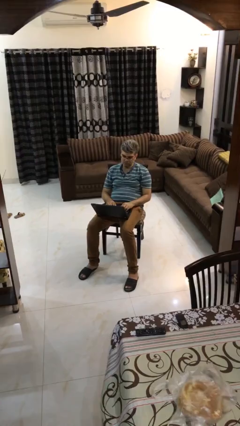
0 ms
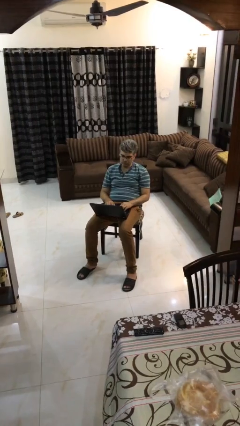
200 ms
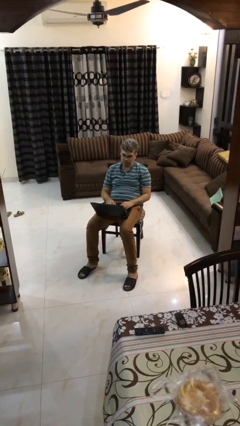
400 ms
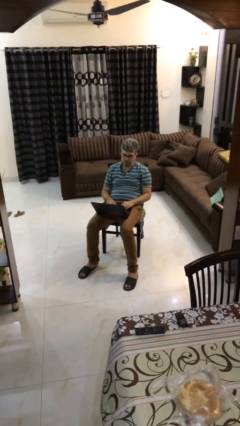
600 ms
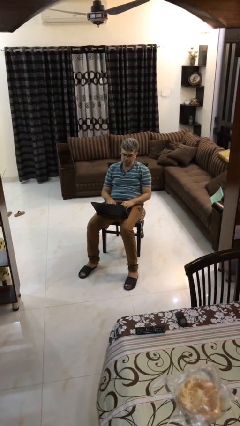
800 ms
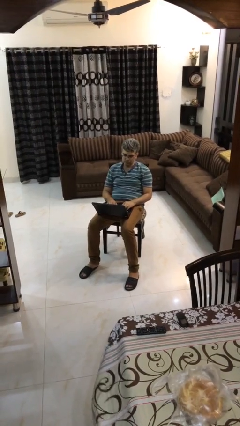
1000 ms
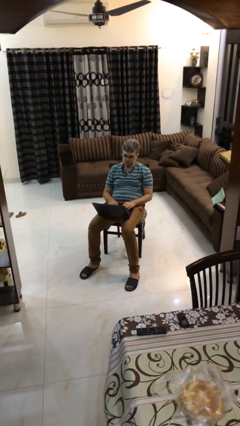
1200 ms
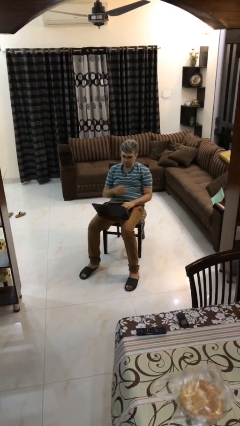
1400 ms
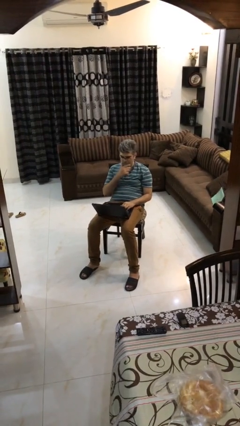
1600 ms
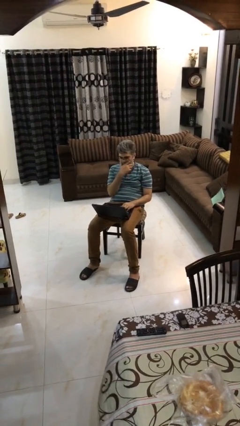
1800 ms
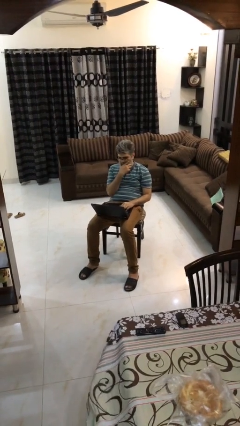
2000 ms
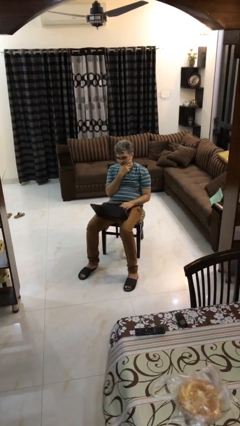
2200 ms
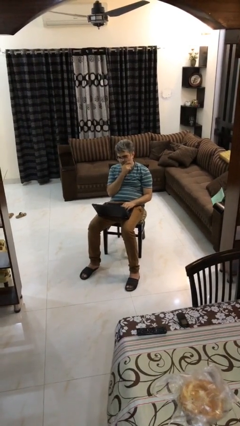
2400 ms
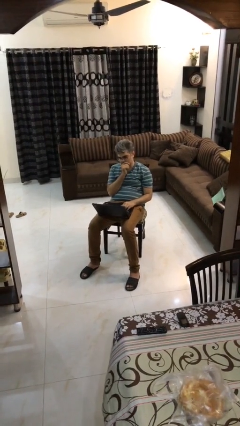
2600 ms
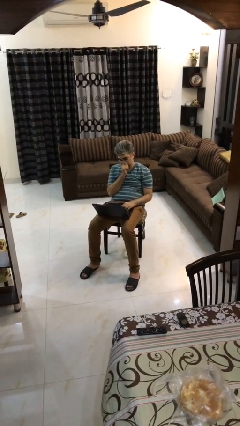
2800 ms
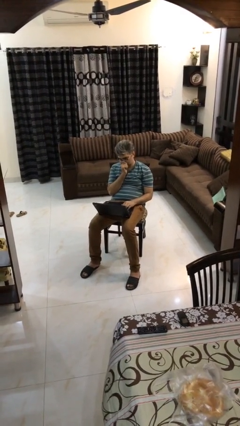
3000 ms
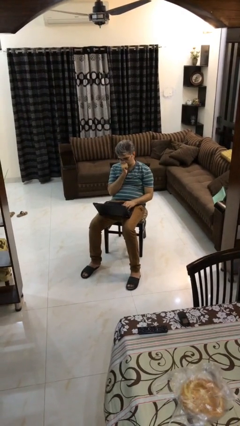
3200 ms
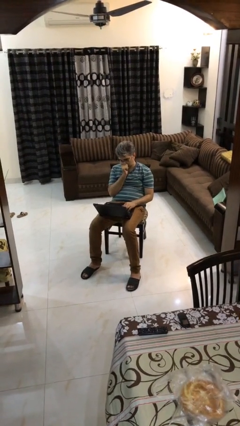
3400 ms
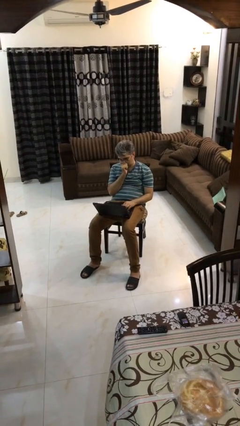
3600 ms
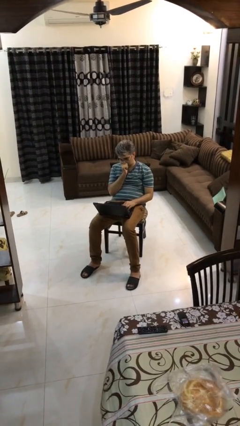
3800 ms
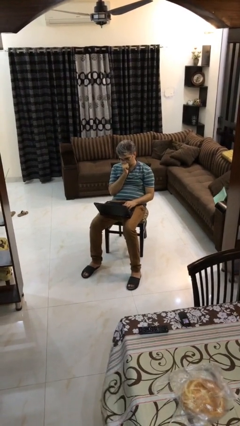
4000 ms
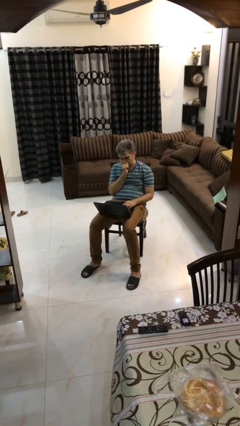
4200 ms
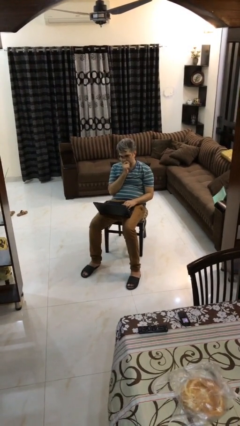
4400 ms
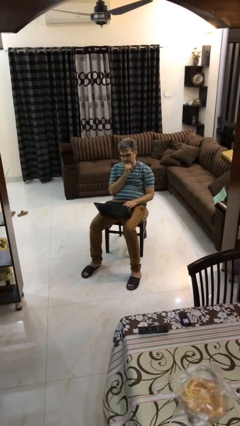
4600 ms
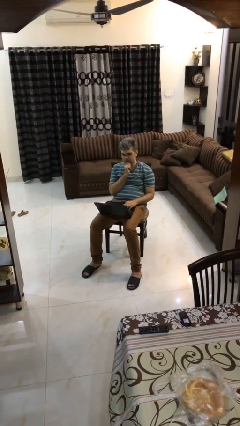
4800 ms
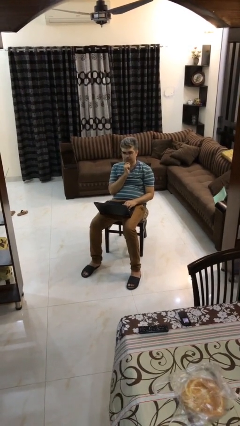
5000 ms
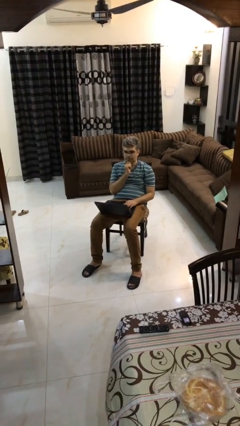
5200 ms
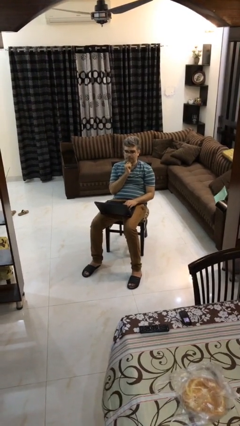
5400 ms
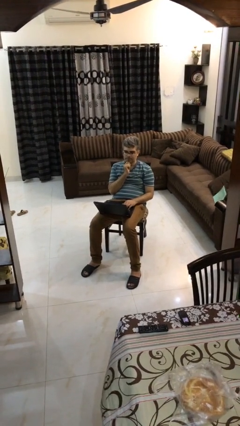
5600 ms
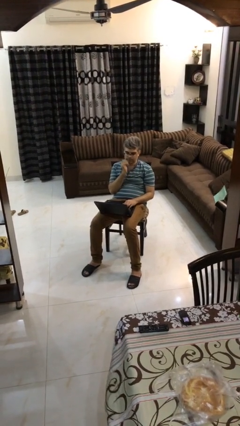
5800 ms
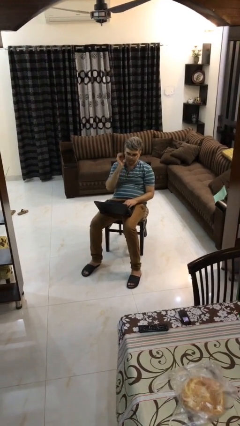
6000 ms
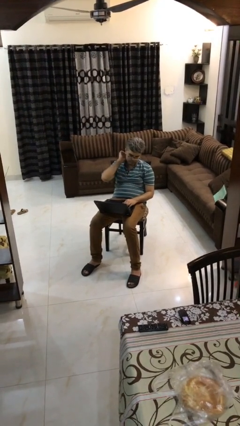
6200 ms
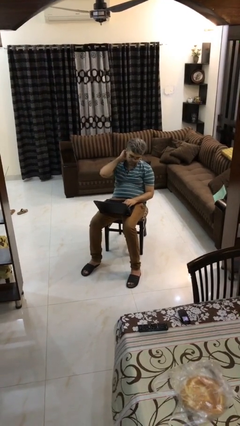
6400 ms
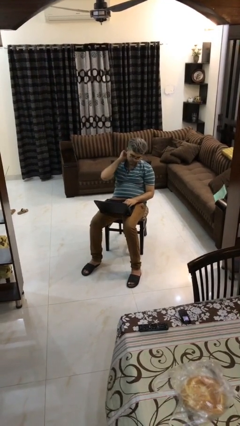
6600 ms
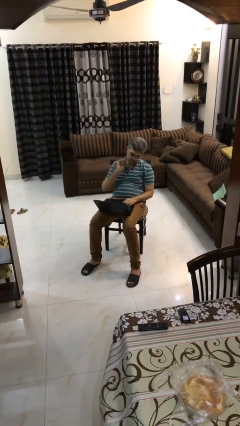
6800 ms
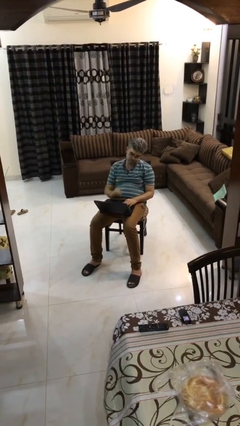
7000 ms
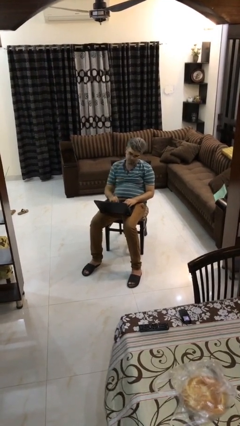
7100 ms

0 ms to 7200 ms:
person interacts with laptop

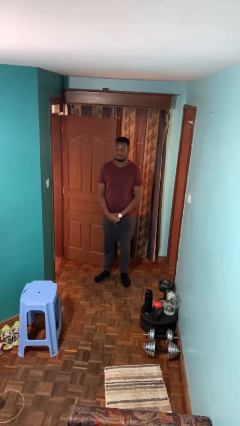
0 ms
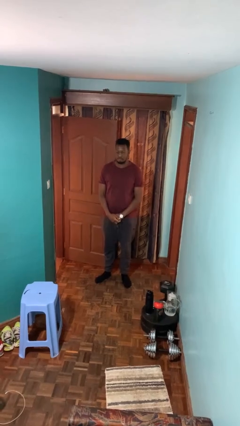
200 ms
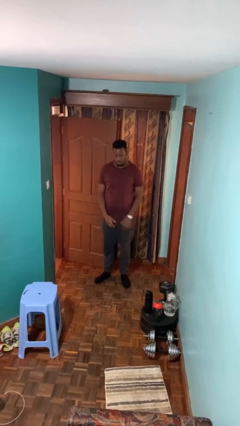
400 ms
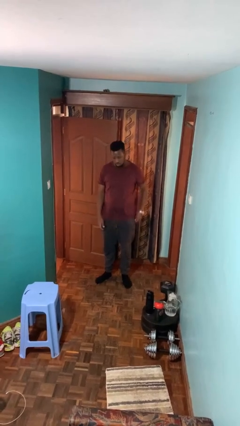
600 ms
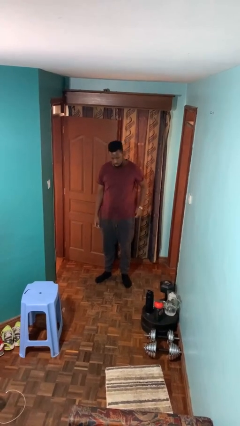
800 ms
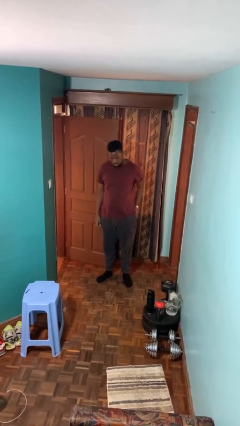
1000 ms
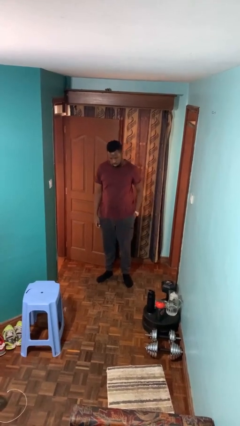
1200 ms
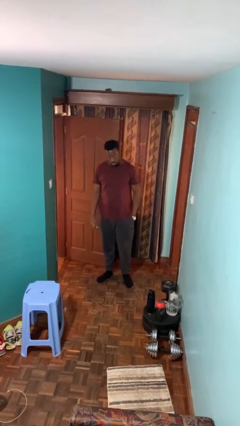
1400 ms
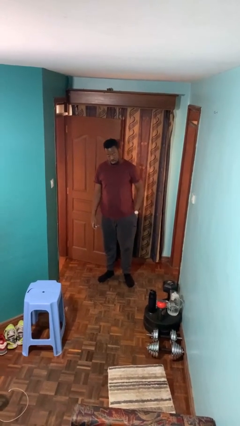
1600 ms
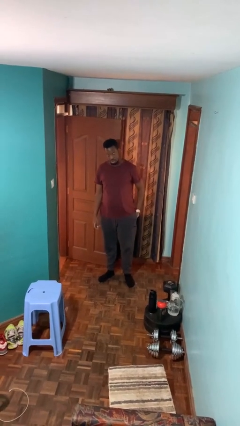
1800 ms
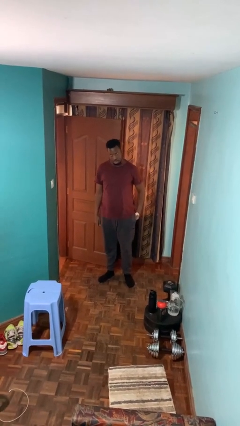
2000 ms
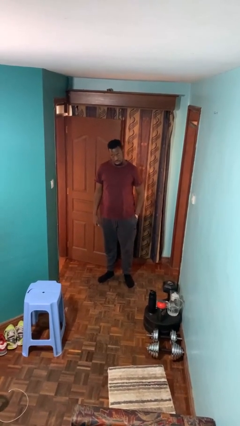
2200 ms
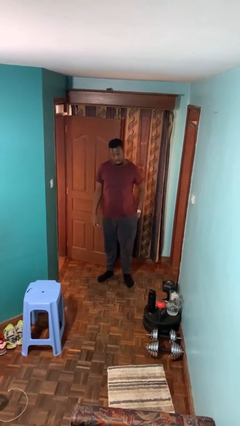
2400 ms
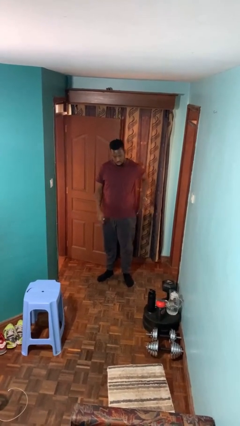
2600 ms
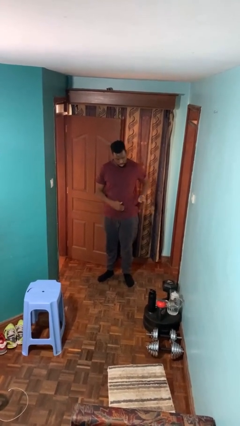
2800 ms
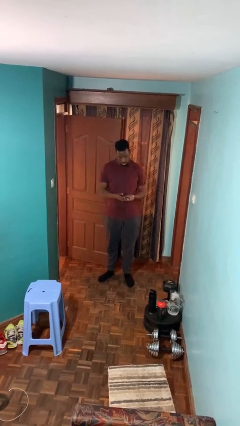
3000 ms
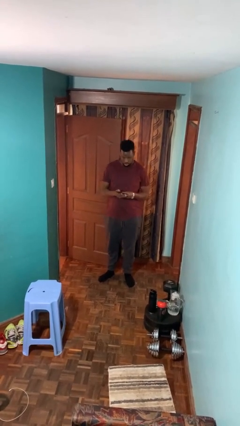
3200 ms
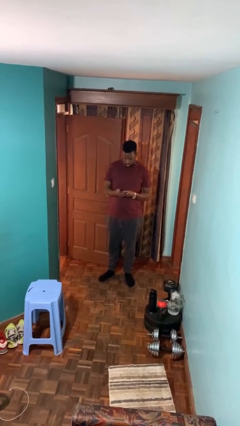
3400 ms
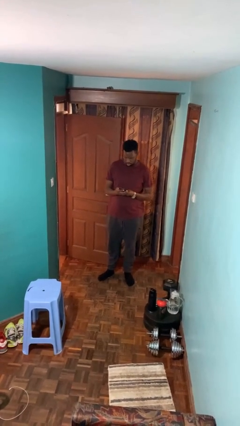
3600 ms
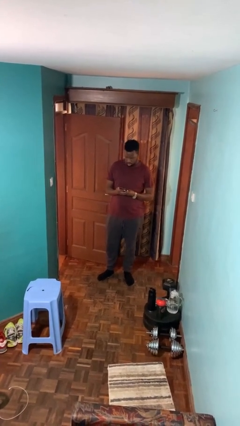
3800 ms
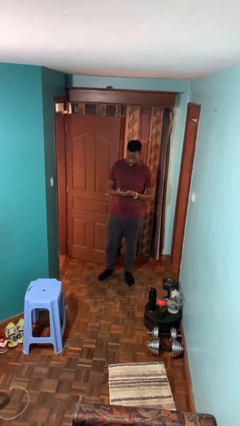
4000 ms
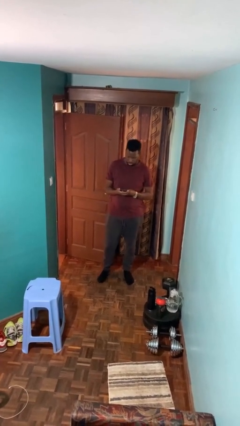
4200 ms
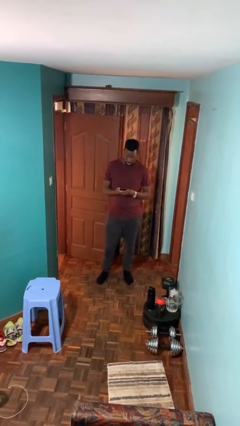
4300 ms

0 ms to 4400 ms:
person takes phone from pocket

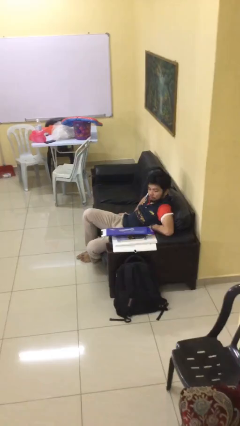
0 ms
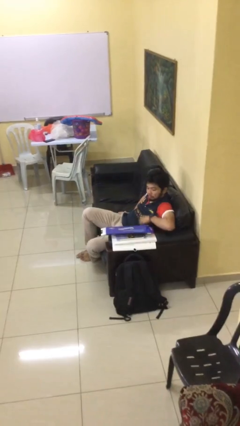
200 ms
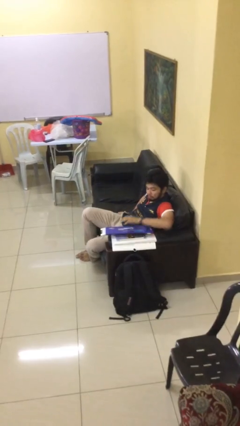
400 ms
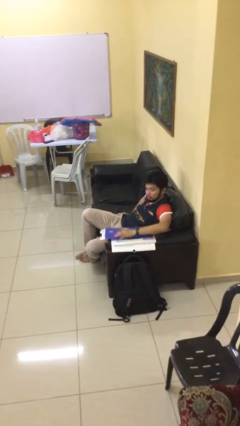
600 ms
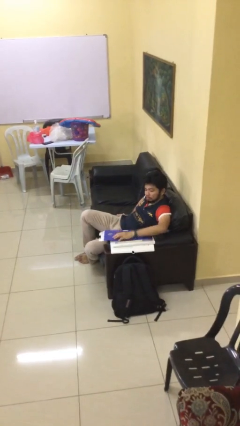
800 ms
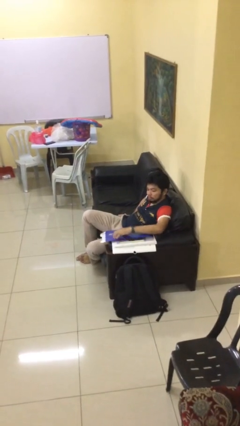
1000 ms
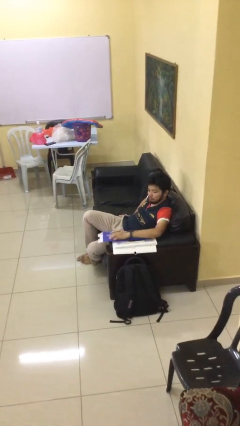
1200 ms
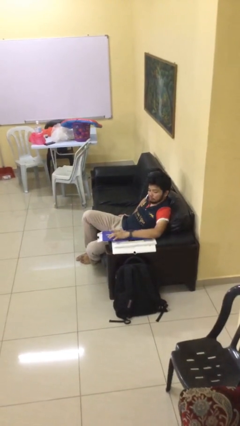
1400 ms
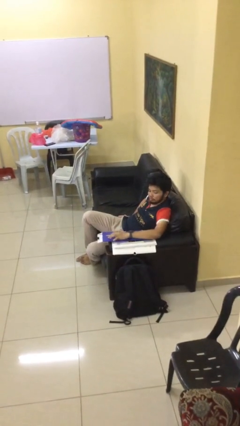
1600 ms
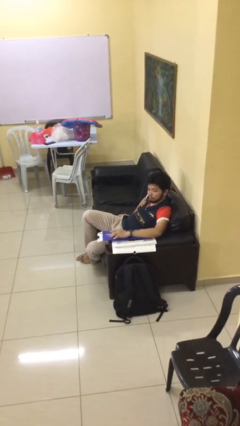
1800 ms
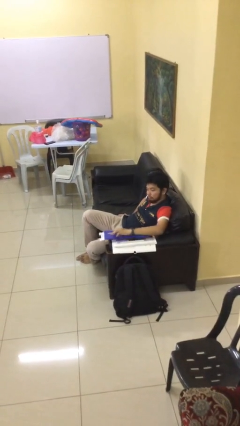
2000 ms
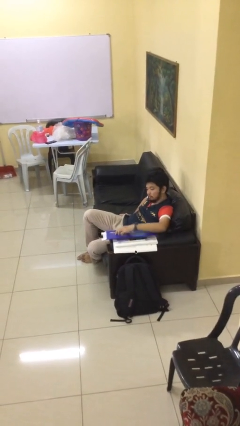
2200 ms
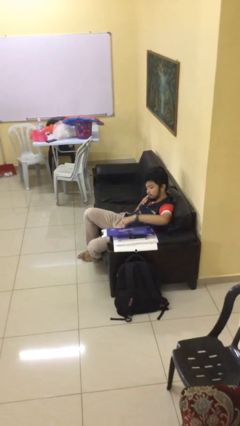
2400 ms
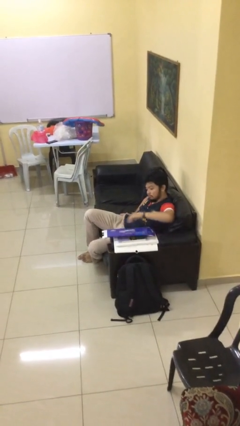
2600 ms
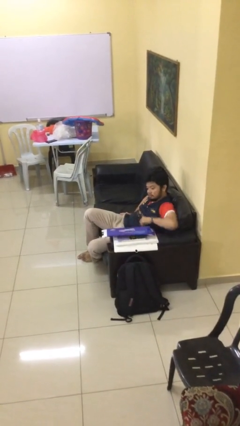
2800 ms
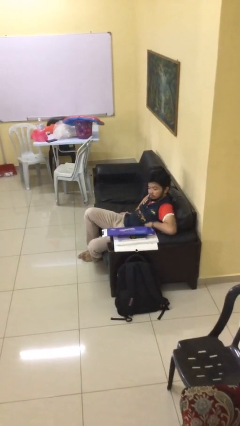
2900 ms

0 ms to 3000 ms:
person taps object with finger

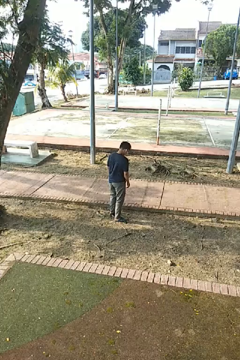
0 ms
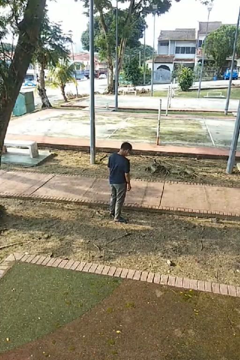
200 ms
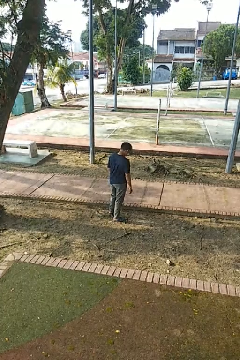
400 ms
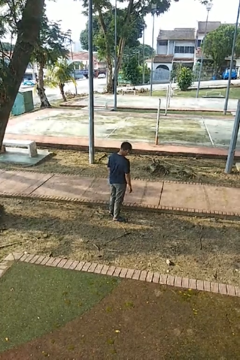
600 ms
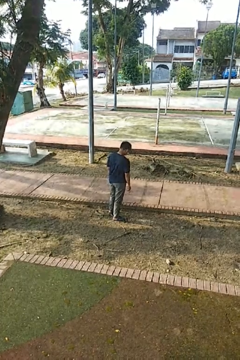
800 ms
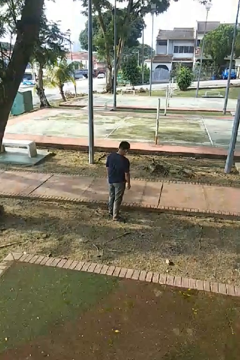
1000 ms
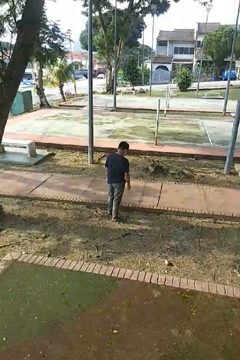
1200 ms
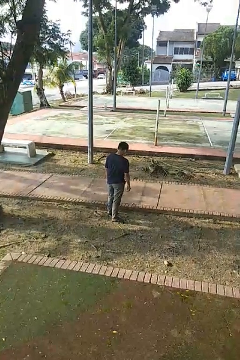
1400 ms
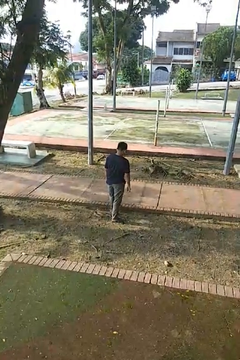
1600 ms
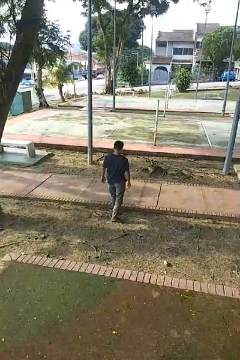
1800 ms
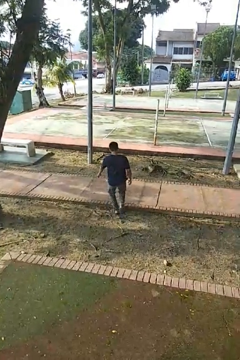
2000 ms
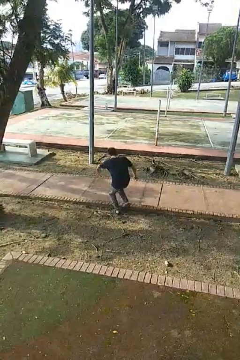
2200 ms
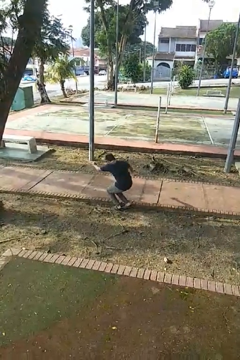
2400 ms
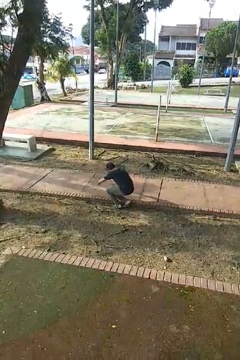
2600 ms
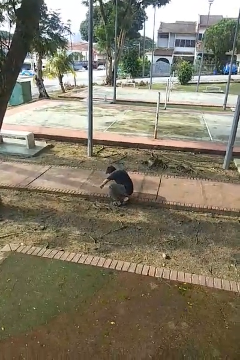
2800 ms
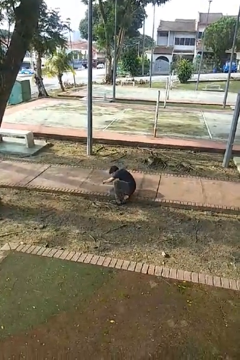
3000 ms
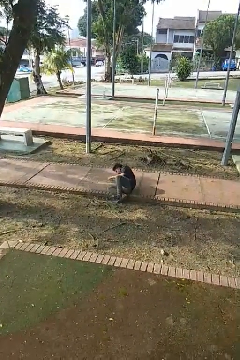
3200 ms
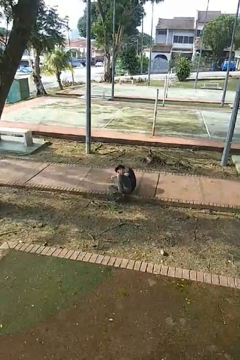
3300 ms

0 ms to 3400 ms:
person trips on object on floor

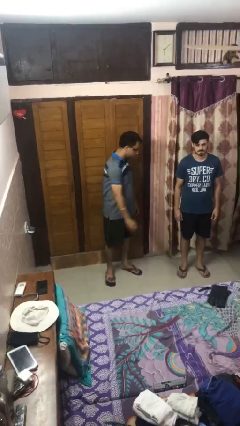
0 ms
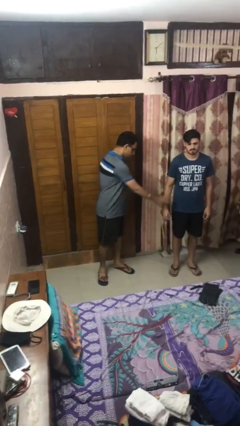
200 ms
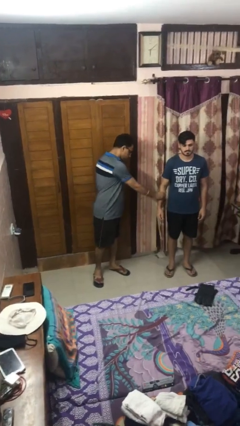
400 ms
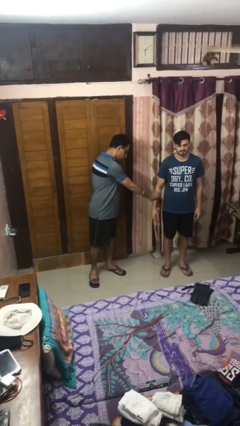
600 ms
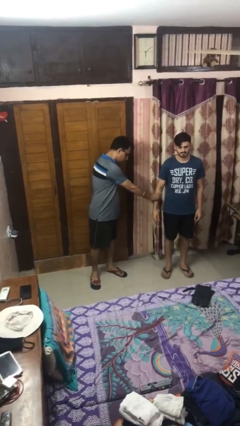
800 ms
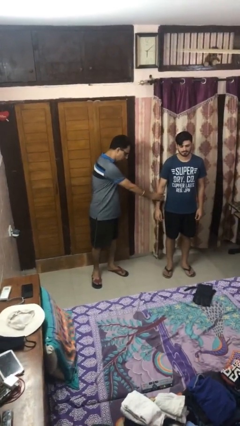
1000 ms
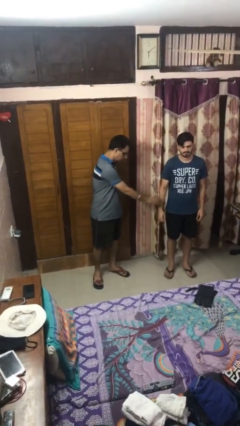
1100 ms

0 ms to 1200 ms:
person grabs person by forearm
